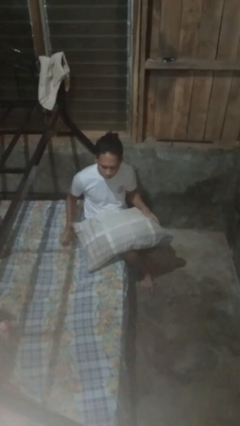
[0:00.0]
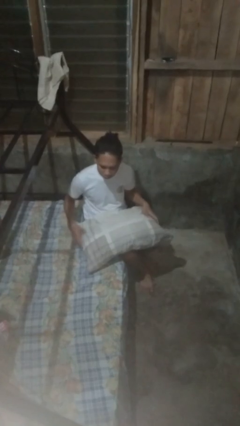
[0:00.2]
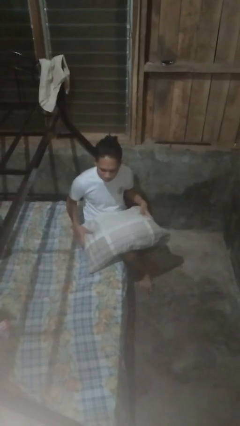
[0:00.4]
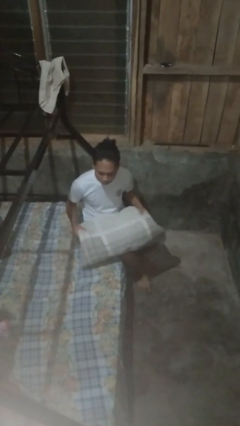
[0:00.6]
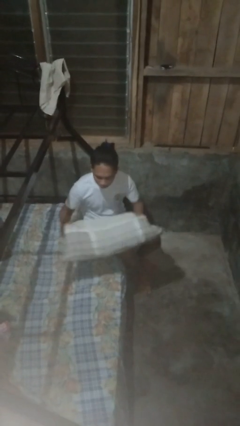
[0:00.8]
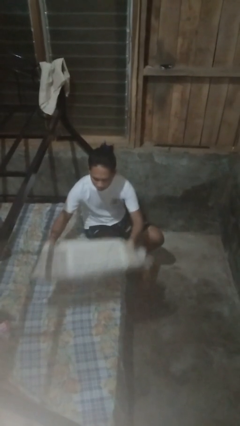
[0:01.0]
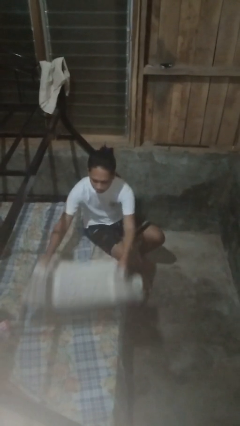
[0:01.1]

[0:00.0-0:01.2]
person puts down object on bed

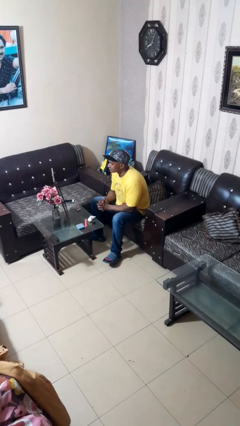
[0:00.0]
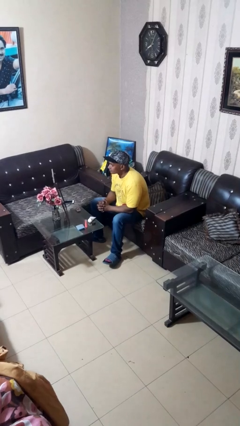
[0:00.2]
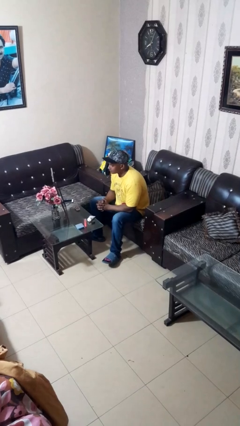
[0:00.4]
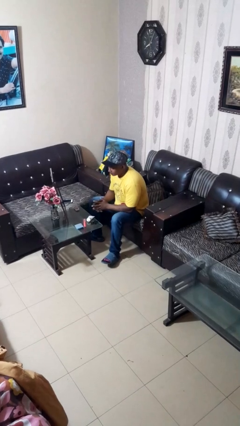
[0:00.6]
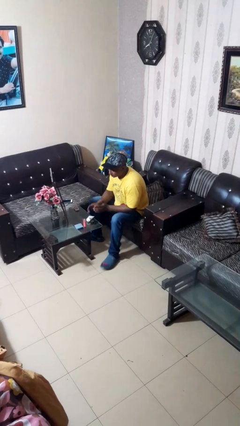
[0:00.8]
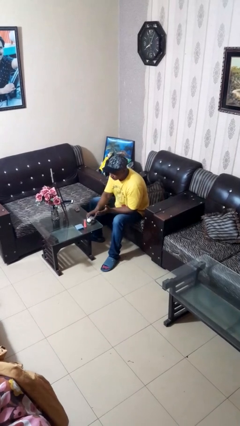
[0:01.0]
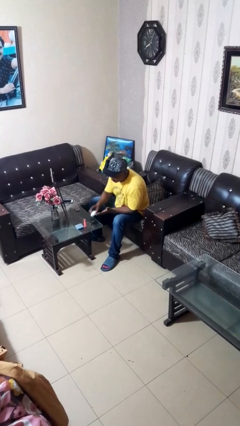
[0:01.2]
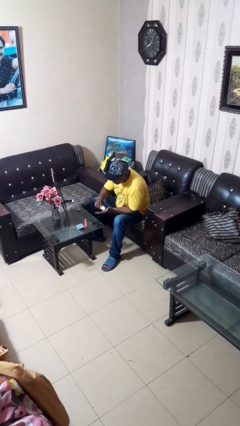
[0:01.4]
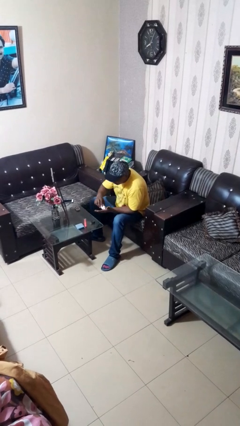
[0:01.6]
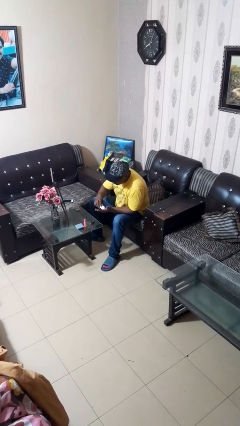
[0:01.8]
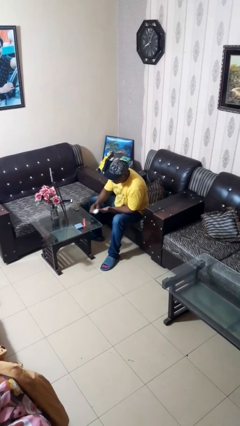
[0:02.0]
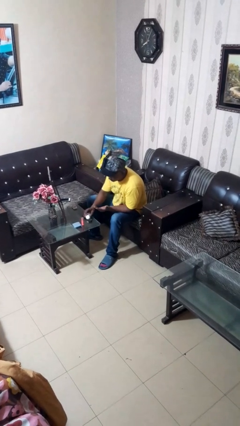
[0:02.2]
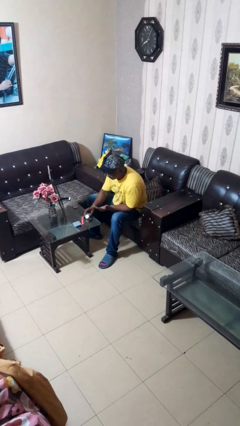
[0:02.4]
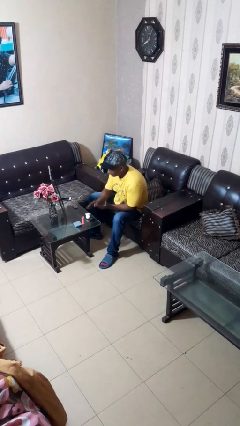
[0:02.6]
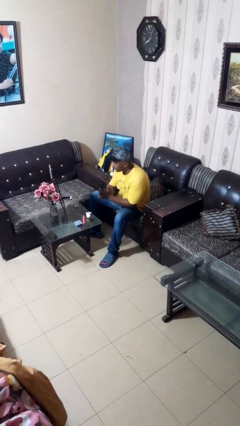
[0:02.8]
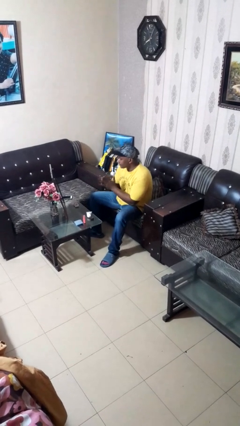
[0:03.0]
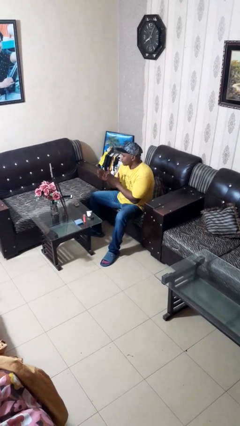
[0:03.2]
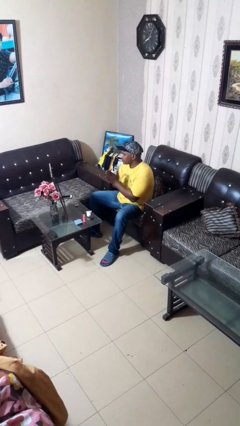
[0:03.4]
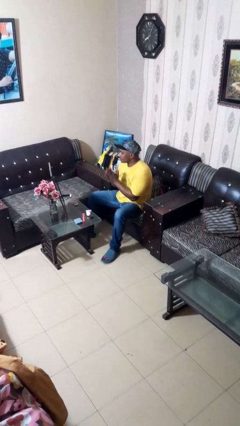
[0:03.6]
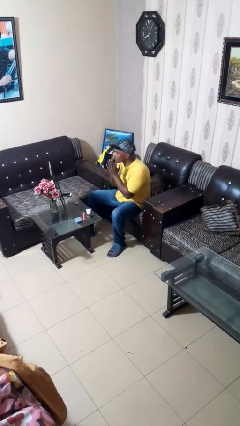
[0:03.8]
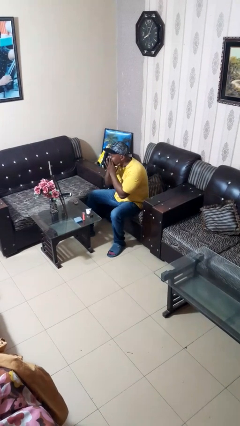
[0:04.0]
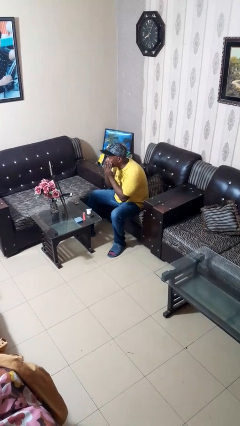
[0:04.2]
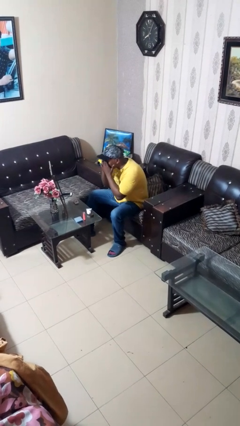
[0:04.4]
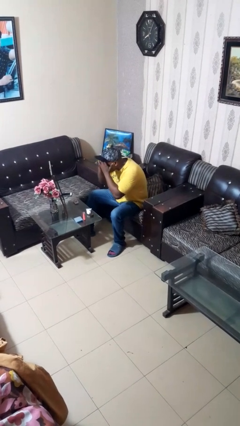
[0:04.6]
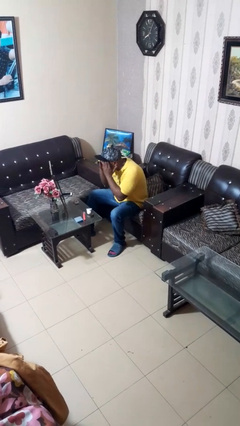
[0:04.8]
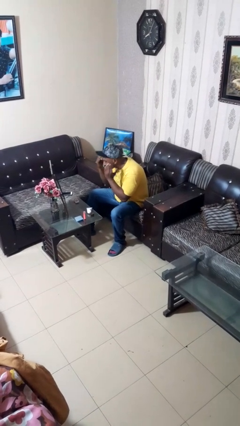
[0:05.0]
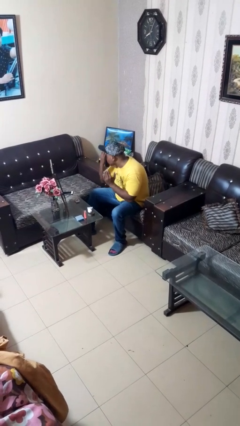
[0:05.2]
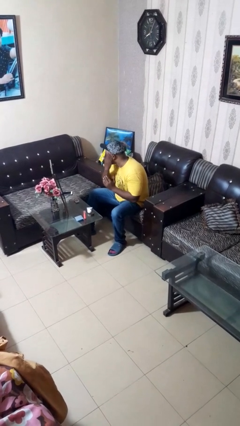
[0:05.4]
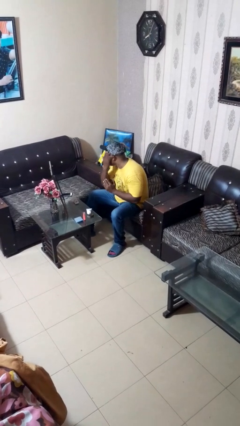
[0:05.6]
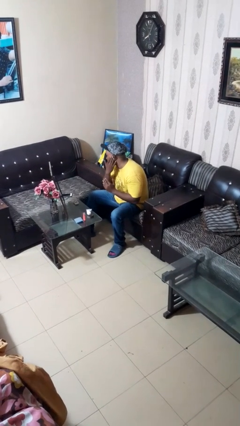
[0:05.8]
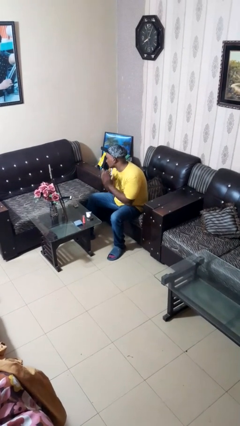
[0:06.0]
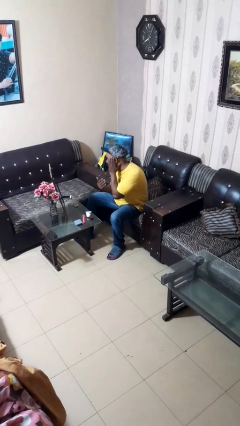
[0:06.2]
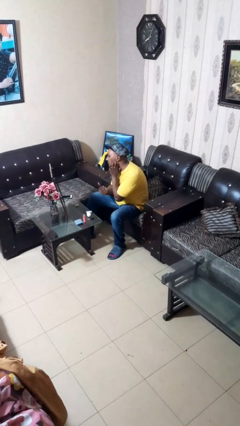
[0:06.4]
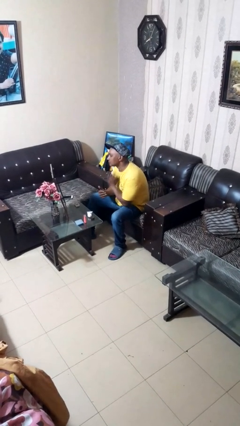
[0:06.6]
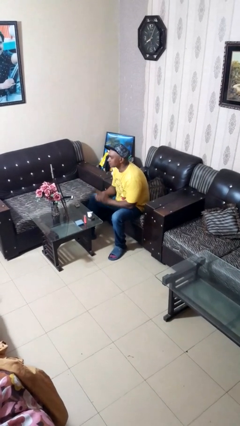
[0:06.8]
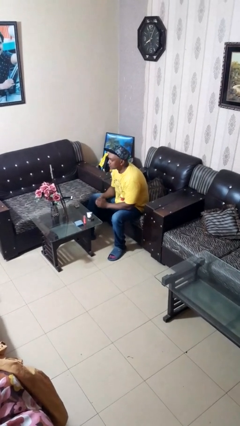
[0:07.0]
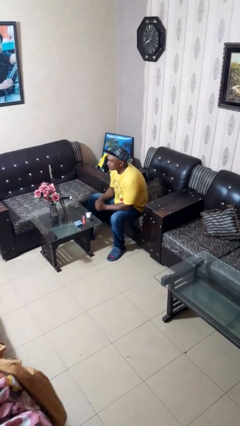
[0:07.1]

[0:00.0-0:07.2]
person applies foundation makeup

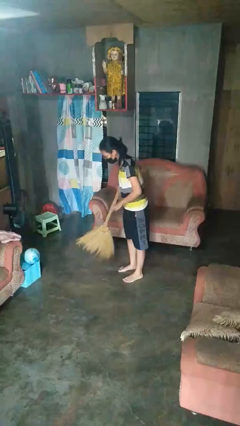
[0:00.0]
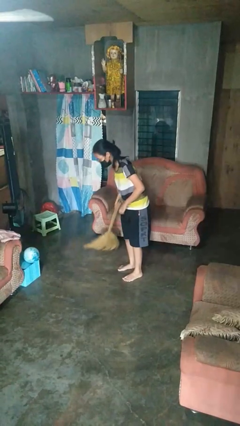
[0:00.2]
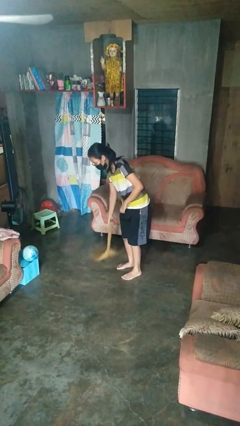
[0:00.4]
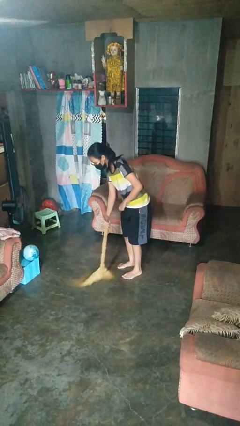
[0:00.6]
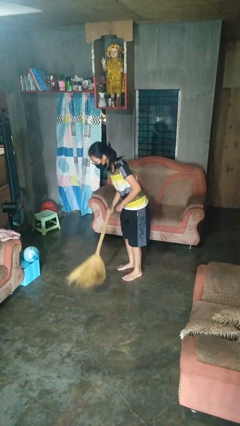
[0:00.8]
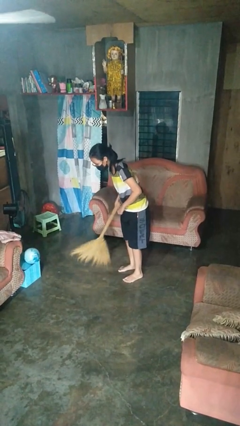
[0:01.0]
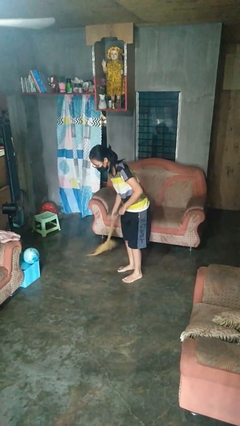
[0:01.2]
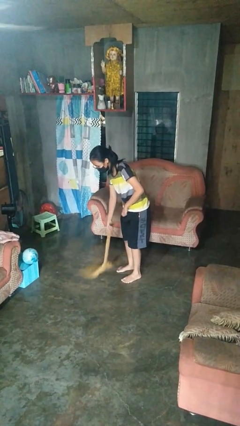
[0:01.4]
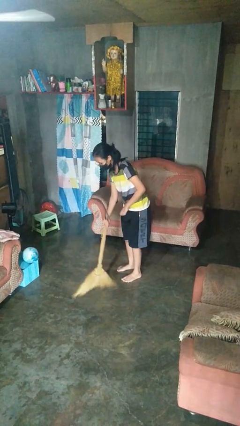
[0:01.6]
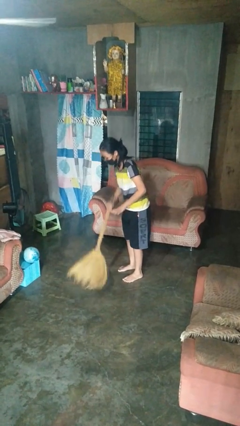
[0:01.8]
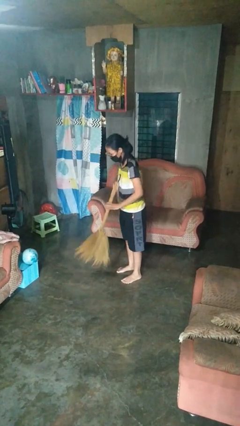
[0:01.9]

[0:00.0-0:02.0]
person sweeps floor

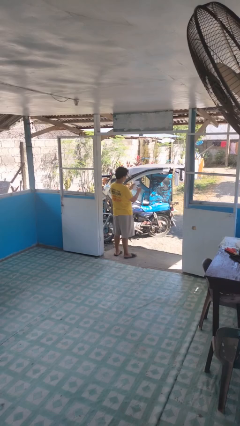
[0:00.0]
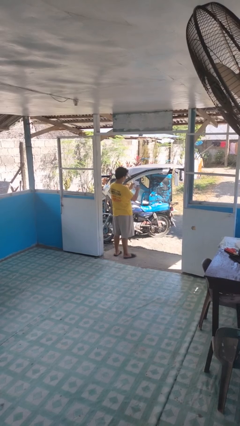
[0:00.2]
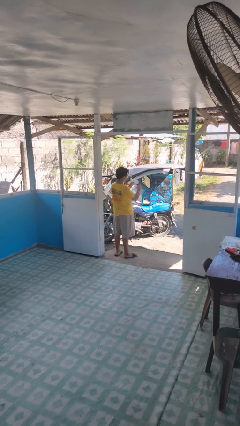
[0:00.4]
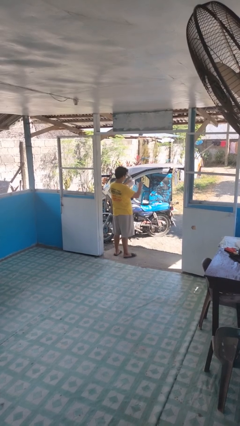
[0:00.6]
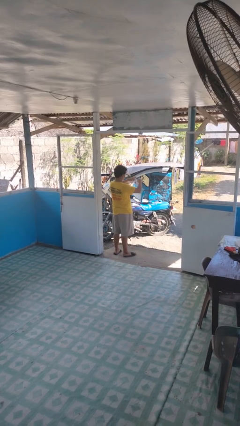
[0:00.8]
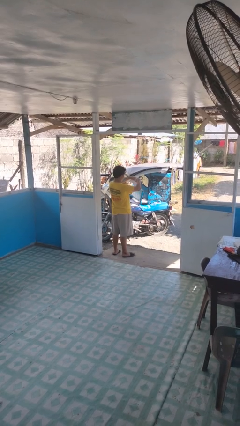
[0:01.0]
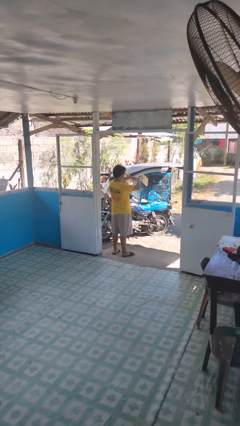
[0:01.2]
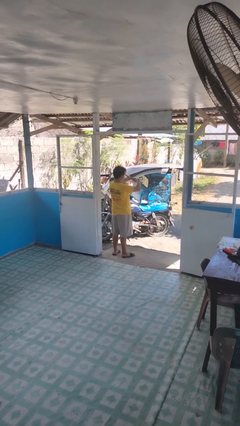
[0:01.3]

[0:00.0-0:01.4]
person tears paper

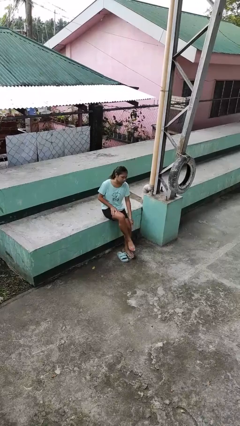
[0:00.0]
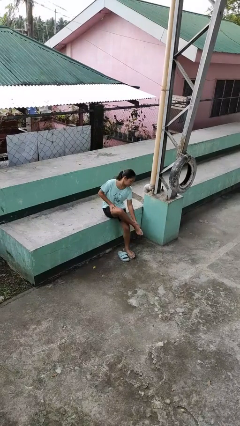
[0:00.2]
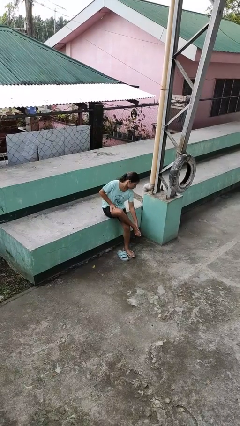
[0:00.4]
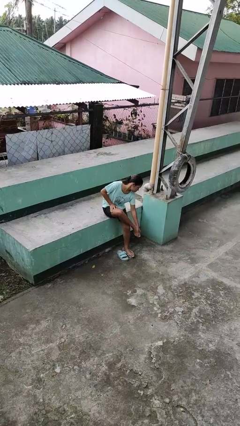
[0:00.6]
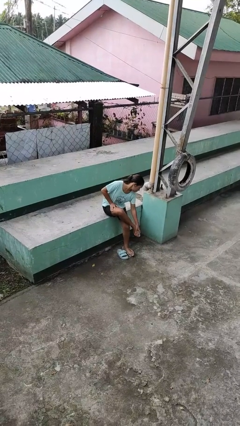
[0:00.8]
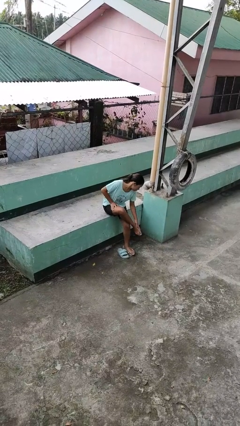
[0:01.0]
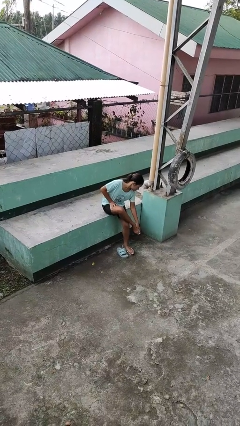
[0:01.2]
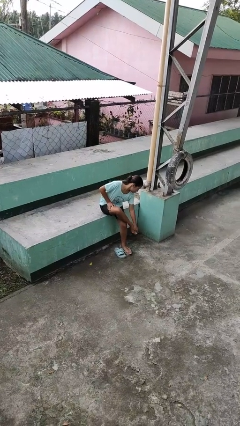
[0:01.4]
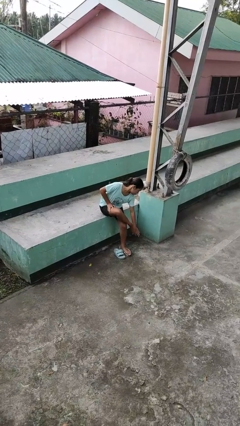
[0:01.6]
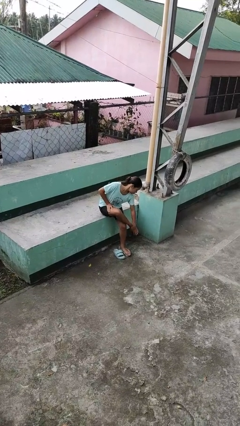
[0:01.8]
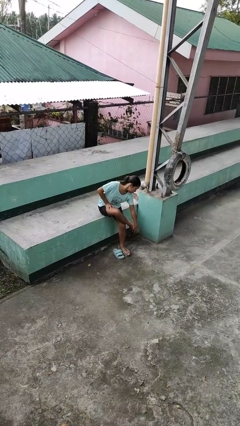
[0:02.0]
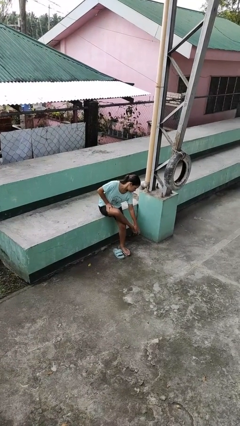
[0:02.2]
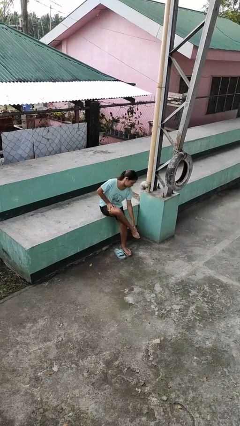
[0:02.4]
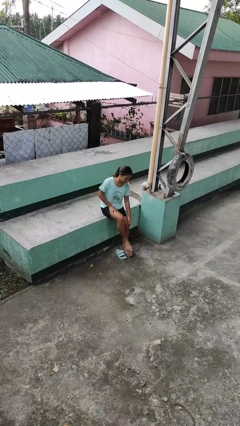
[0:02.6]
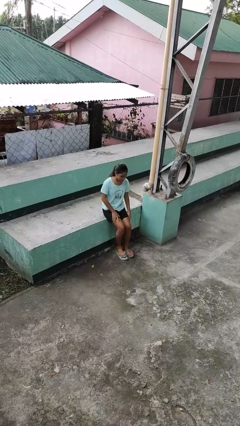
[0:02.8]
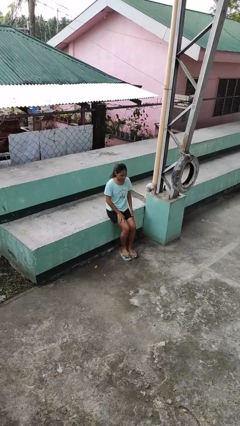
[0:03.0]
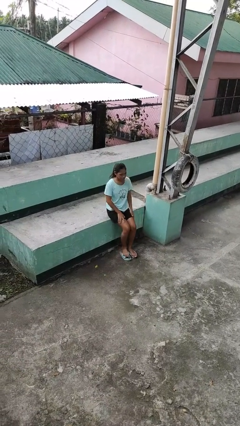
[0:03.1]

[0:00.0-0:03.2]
person rubs foot

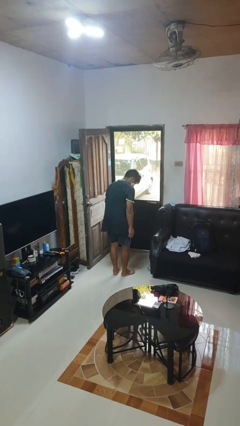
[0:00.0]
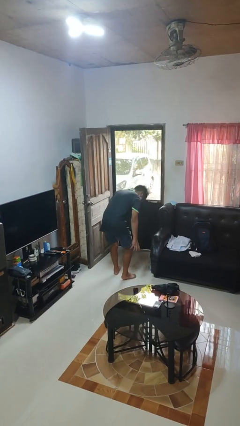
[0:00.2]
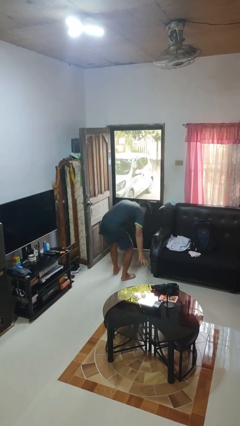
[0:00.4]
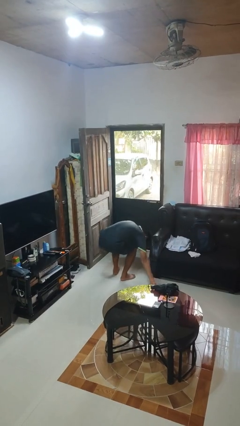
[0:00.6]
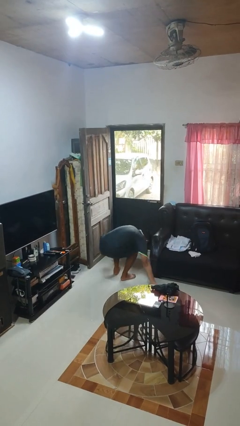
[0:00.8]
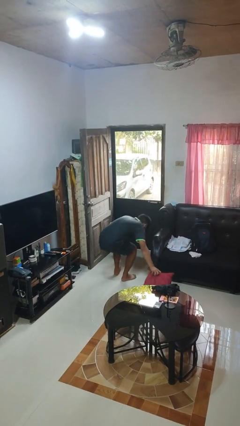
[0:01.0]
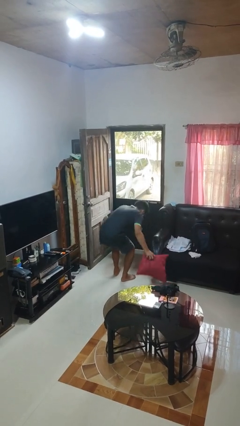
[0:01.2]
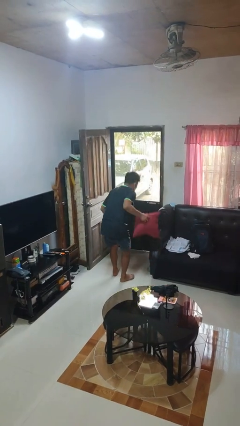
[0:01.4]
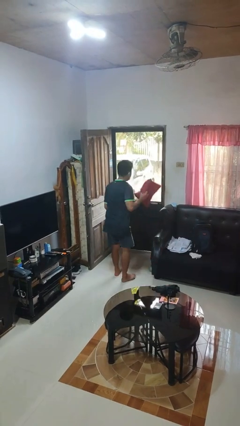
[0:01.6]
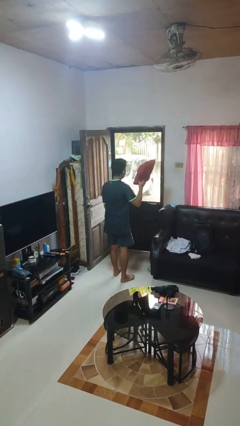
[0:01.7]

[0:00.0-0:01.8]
person picks up object from floor

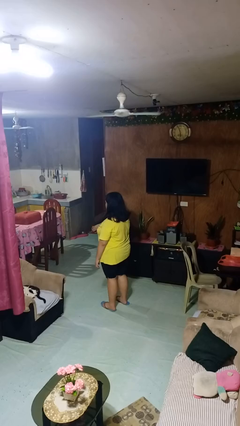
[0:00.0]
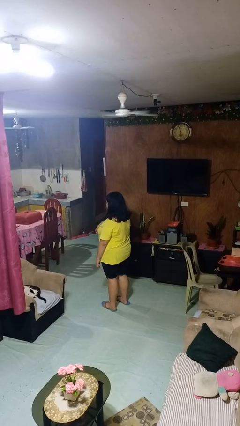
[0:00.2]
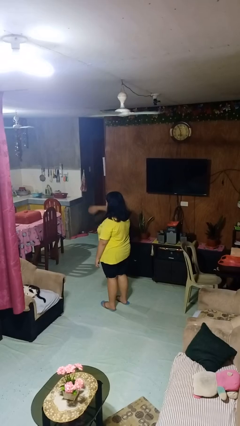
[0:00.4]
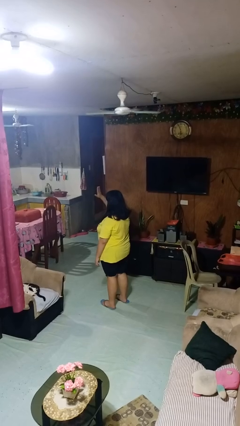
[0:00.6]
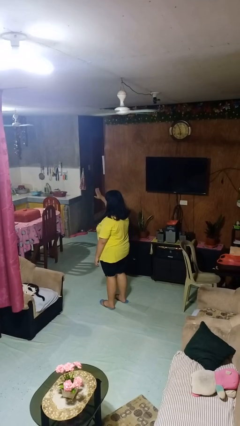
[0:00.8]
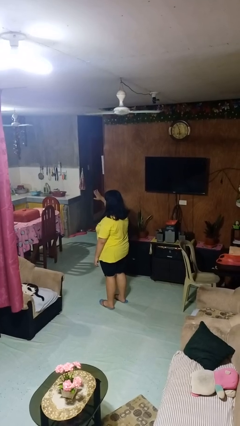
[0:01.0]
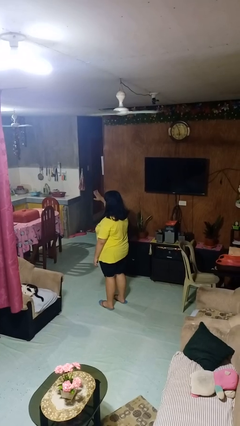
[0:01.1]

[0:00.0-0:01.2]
person gestures swipe up
